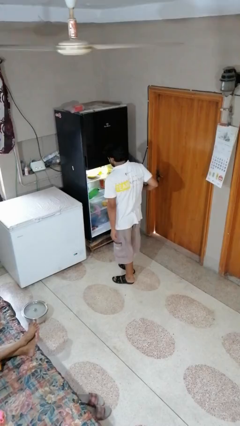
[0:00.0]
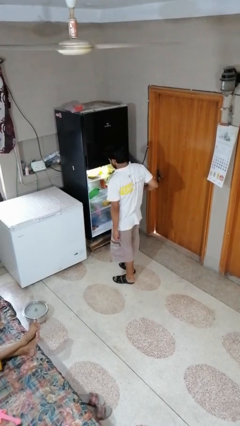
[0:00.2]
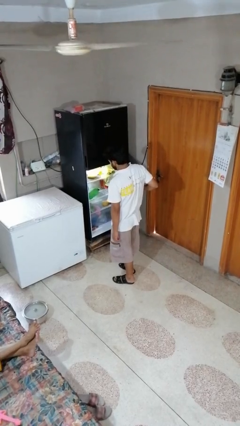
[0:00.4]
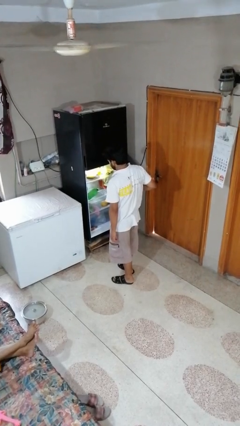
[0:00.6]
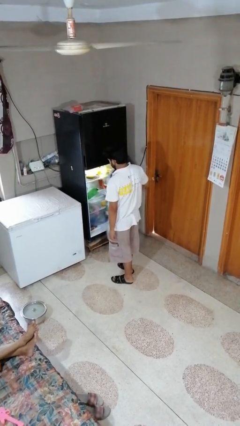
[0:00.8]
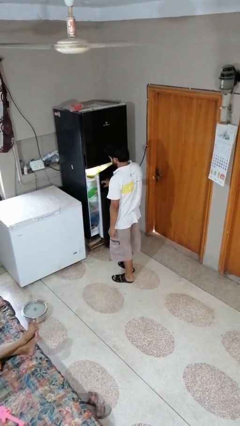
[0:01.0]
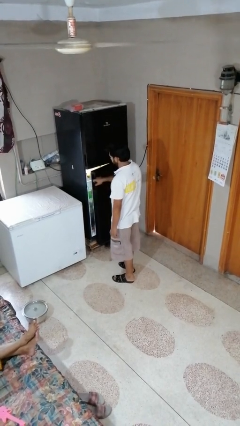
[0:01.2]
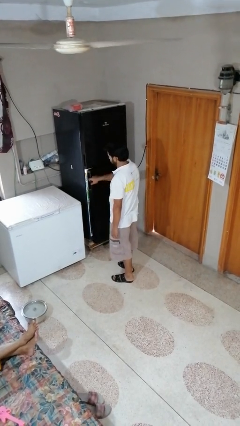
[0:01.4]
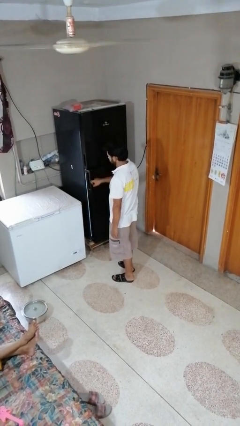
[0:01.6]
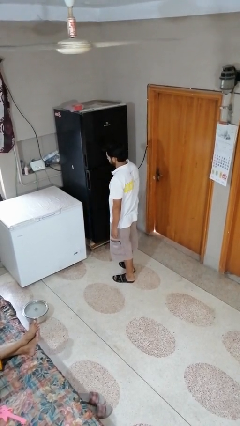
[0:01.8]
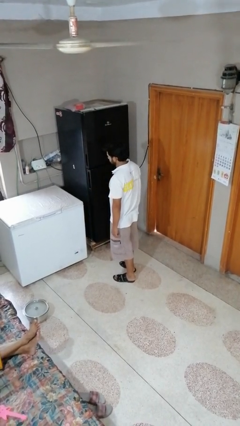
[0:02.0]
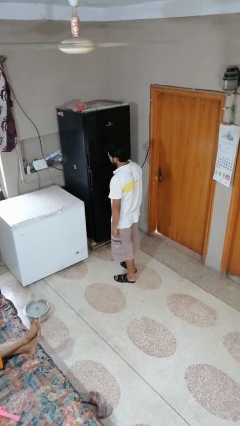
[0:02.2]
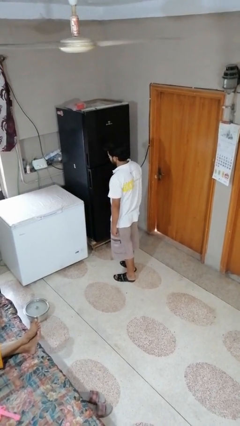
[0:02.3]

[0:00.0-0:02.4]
person closes refrigerator

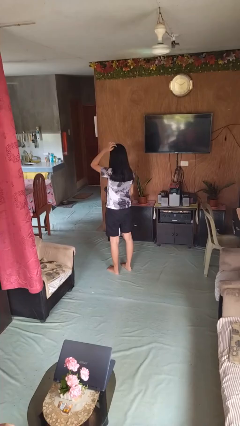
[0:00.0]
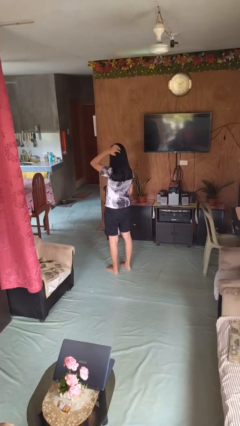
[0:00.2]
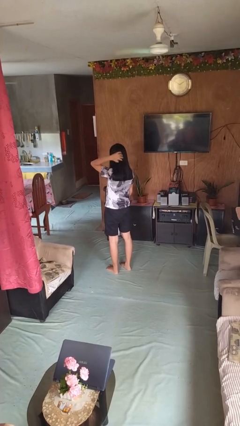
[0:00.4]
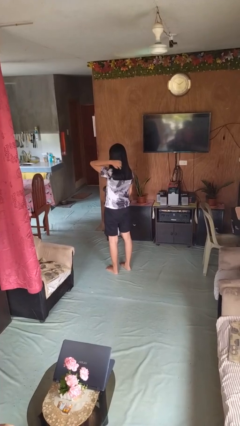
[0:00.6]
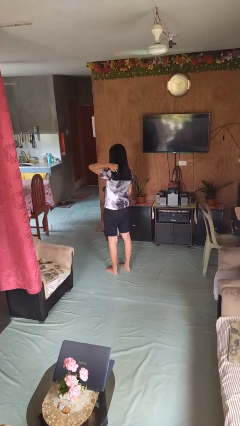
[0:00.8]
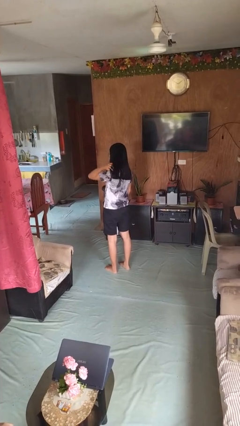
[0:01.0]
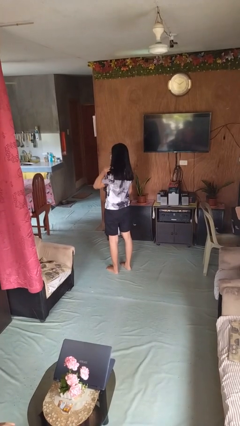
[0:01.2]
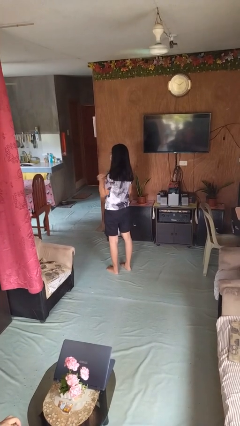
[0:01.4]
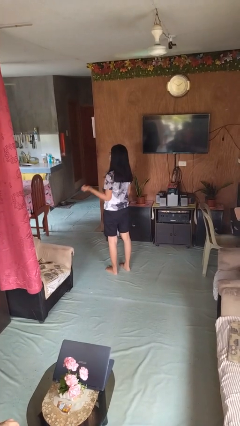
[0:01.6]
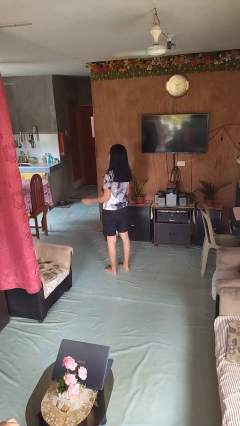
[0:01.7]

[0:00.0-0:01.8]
person strokes hair

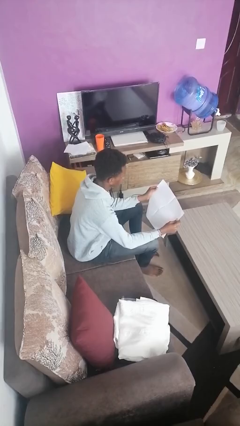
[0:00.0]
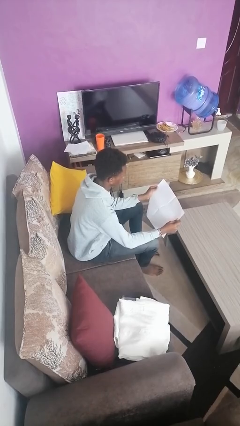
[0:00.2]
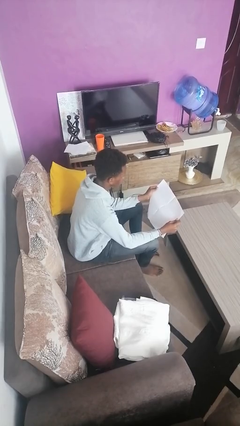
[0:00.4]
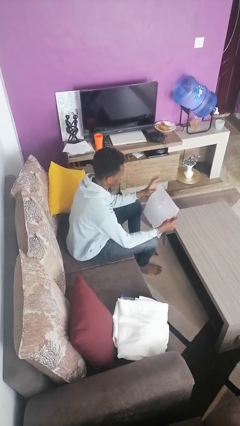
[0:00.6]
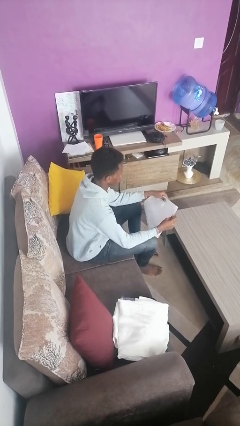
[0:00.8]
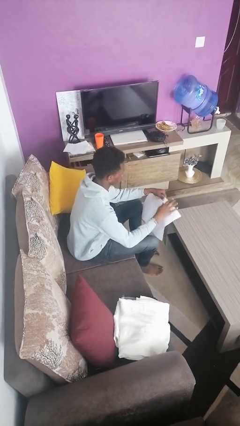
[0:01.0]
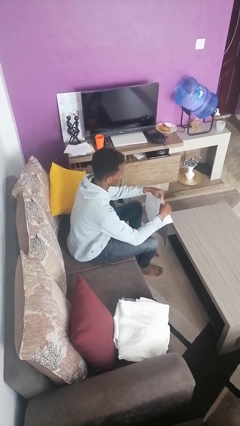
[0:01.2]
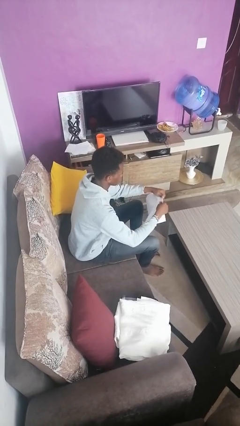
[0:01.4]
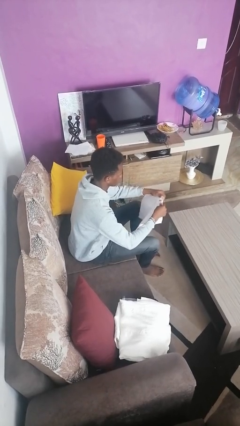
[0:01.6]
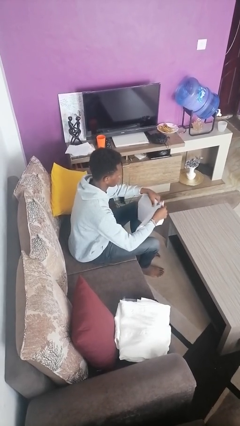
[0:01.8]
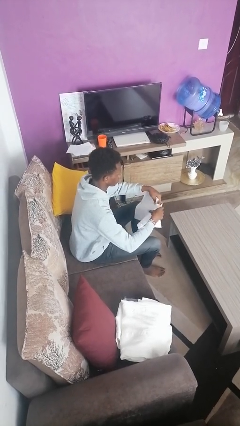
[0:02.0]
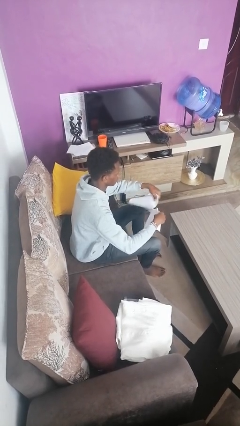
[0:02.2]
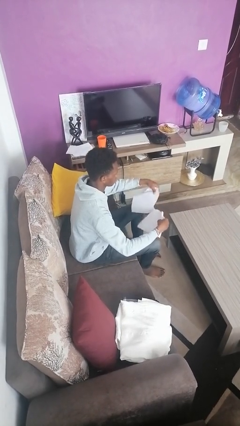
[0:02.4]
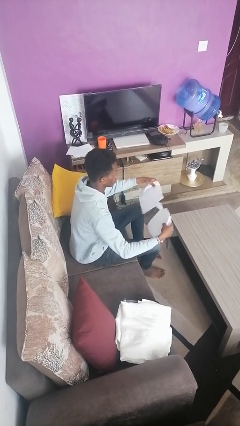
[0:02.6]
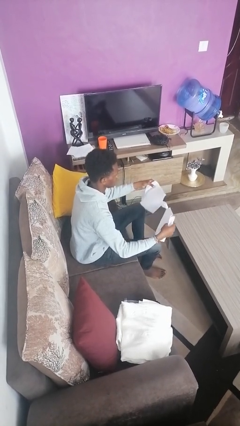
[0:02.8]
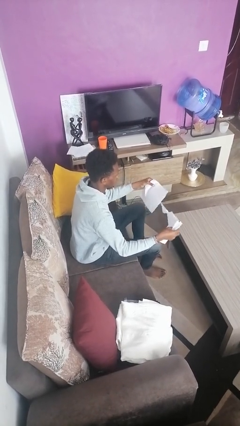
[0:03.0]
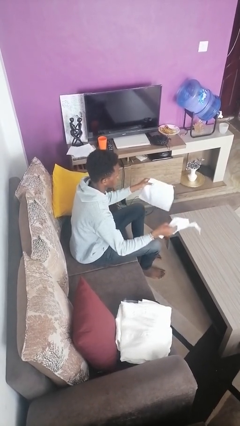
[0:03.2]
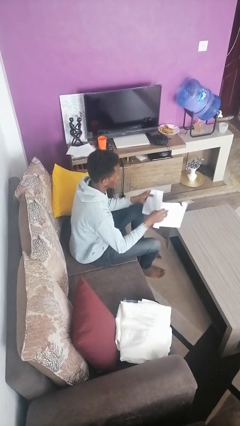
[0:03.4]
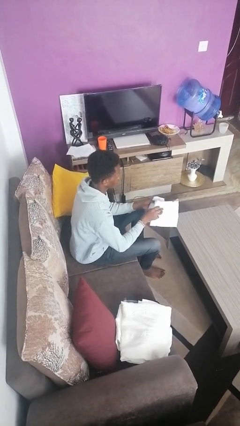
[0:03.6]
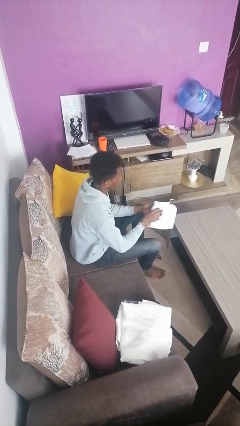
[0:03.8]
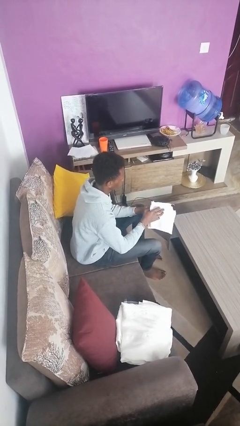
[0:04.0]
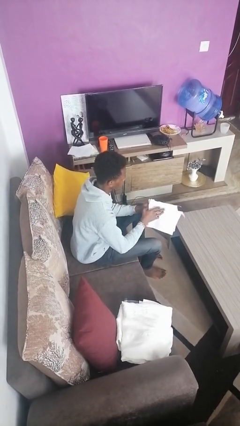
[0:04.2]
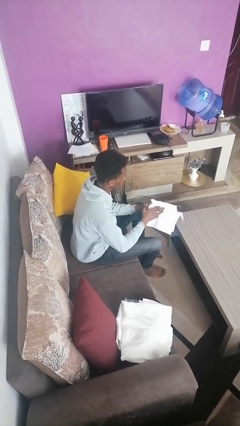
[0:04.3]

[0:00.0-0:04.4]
person tears paper

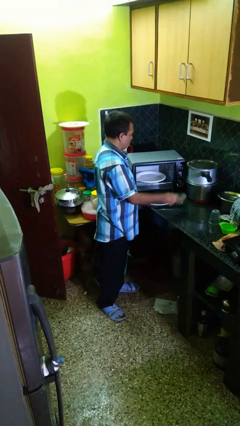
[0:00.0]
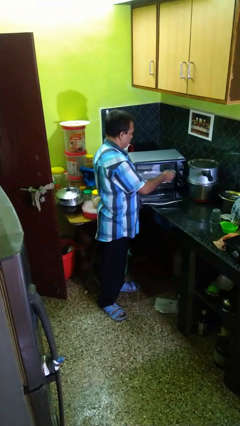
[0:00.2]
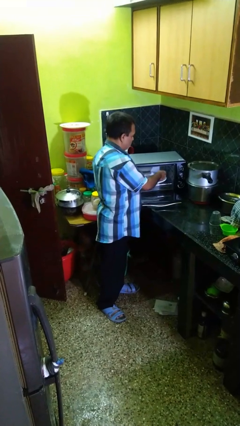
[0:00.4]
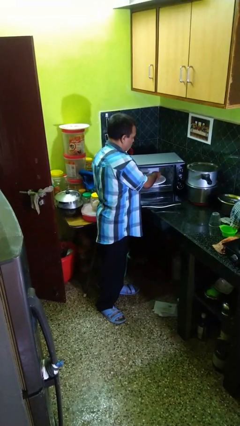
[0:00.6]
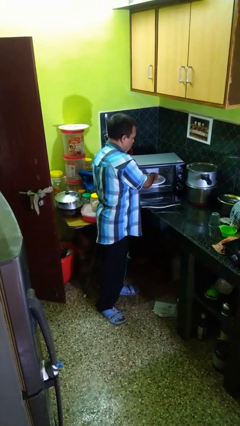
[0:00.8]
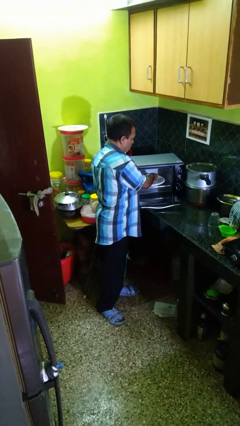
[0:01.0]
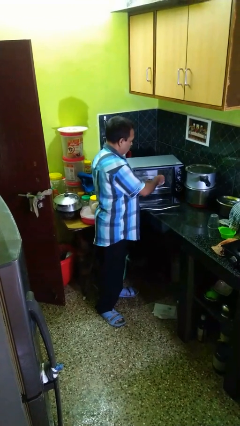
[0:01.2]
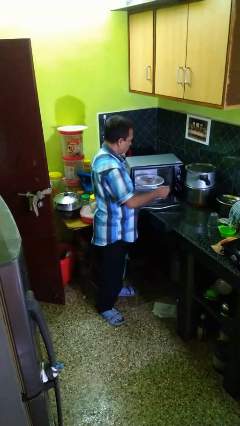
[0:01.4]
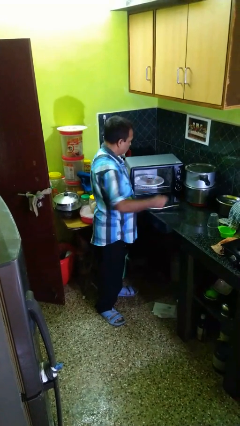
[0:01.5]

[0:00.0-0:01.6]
person puts object into microwave

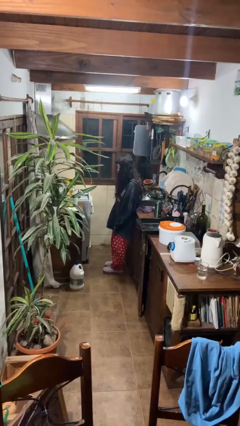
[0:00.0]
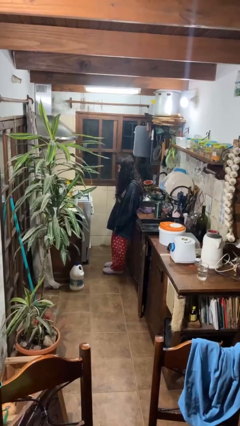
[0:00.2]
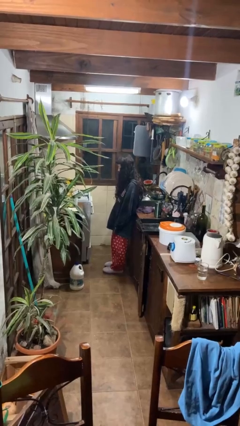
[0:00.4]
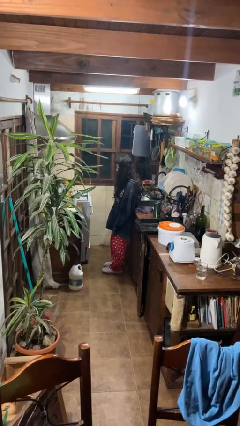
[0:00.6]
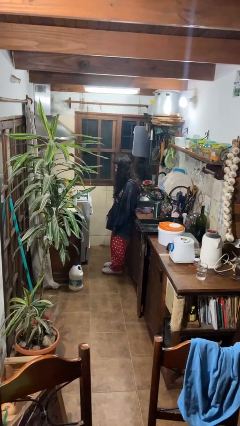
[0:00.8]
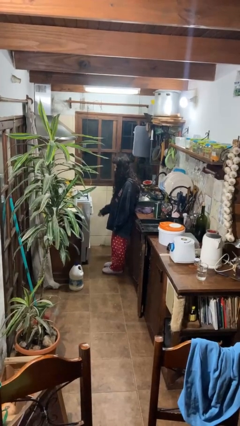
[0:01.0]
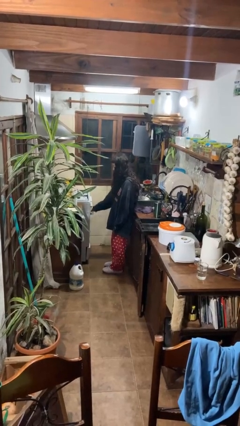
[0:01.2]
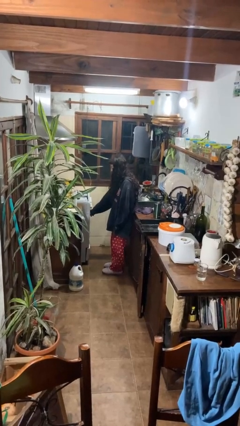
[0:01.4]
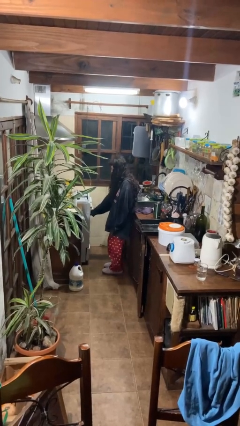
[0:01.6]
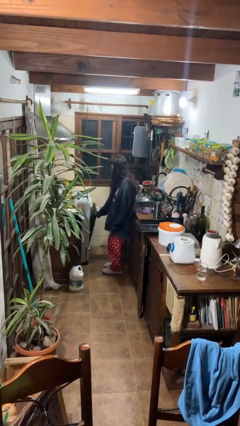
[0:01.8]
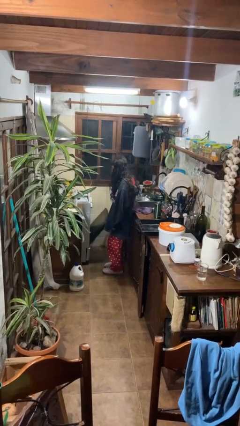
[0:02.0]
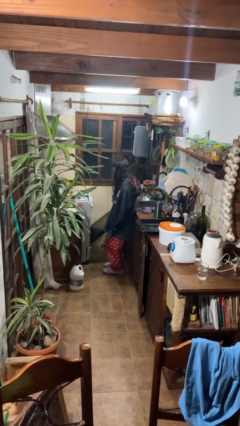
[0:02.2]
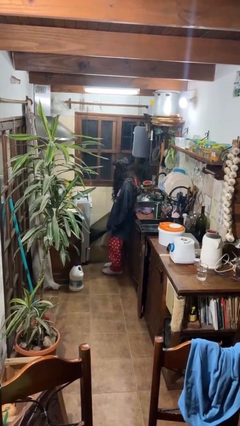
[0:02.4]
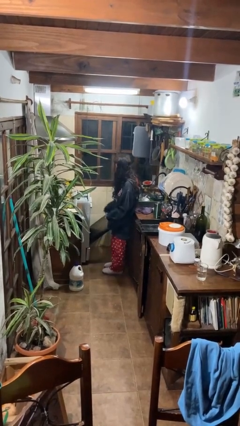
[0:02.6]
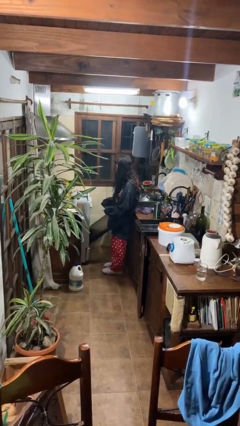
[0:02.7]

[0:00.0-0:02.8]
person opens oven door

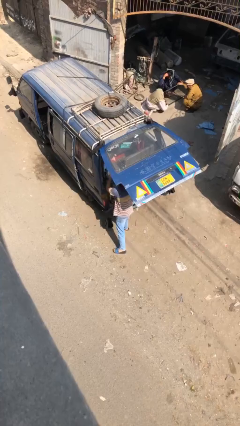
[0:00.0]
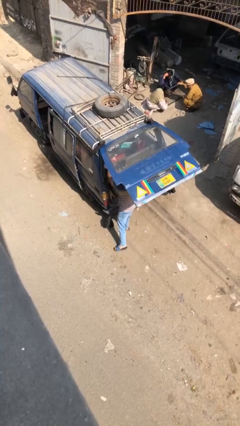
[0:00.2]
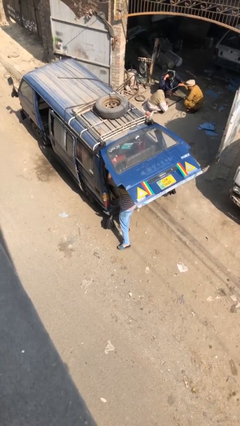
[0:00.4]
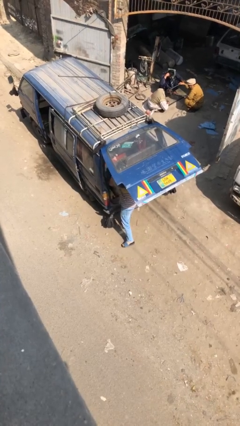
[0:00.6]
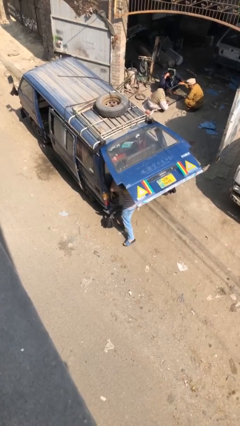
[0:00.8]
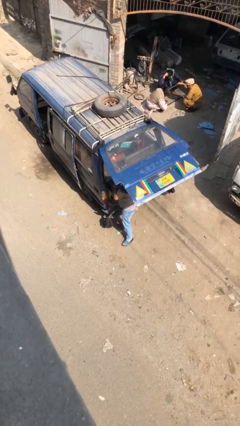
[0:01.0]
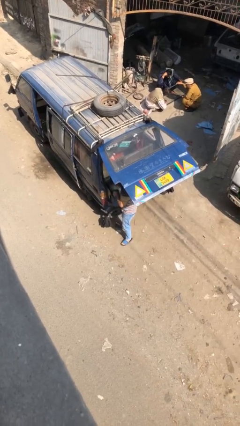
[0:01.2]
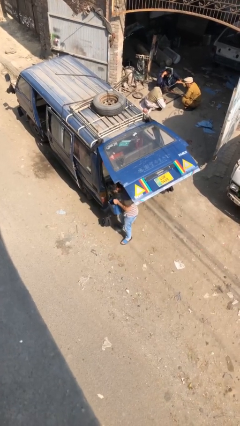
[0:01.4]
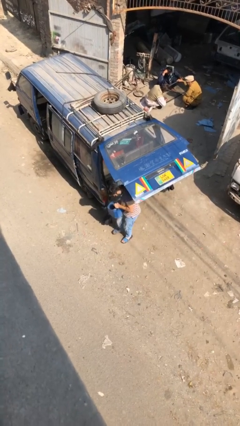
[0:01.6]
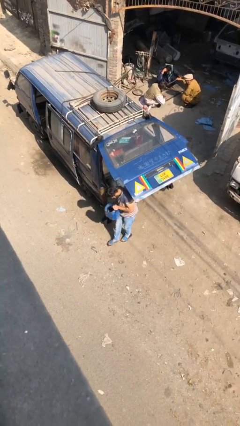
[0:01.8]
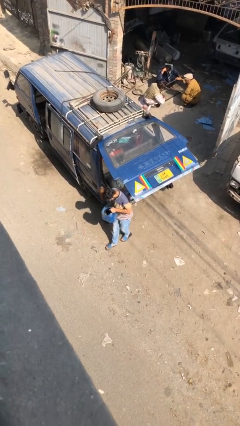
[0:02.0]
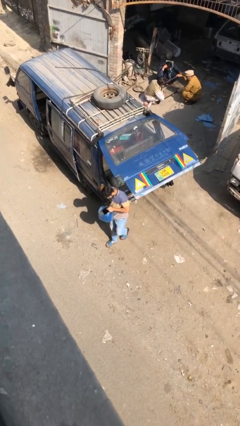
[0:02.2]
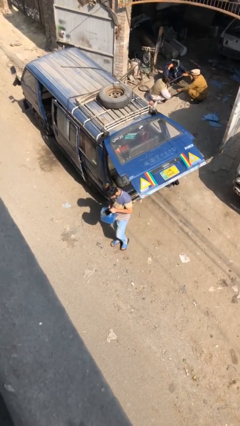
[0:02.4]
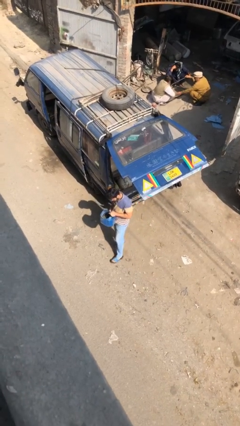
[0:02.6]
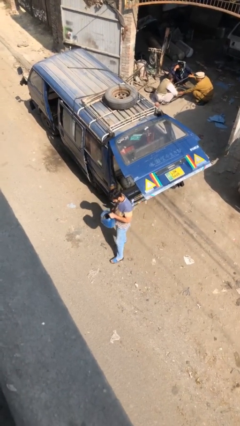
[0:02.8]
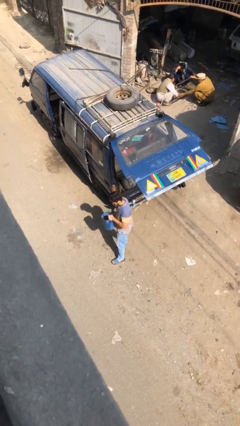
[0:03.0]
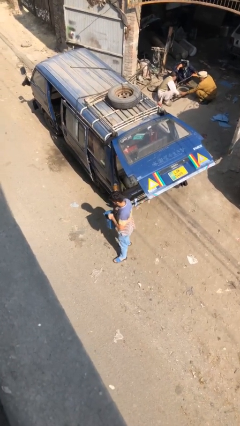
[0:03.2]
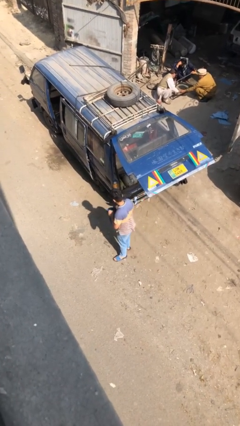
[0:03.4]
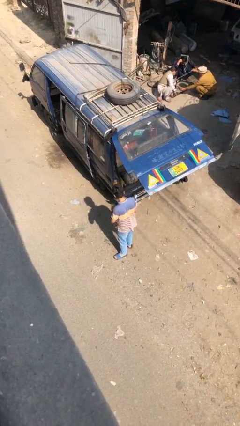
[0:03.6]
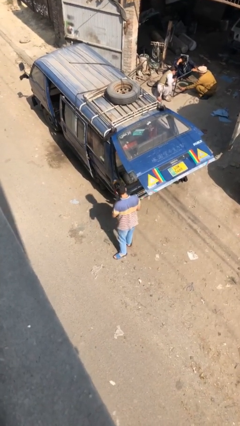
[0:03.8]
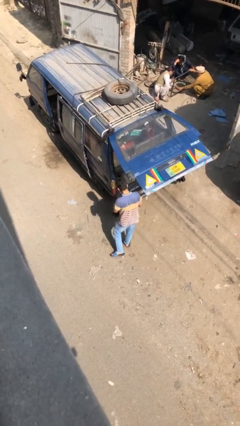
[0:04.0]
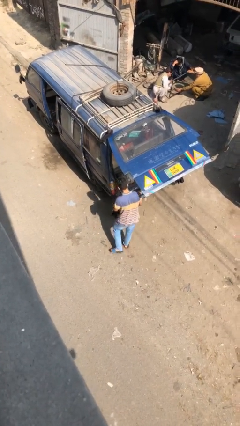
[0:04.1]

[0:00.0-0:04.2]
person unloads car

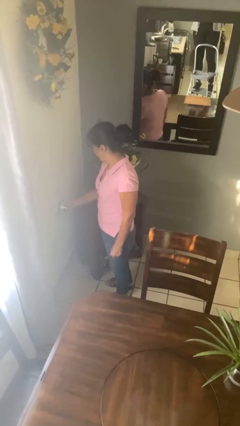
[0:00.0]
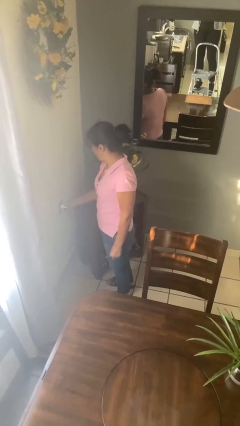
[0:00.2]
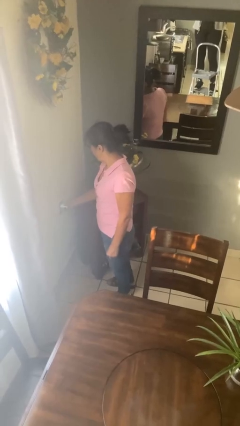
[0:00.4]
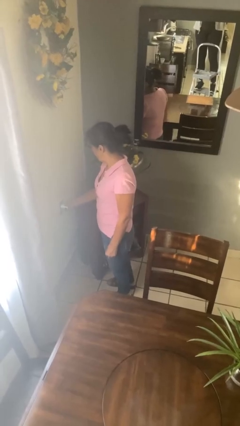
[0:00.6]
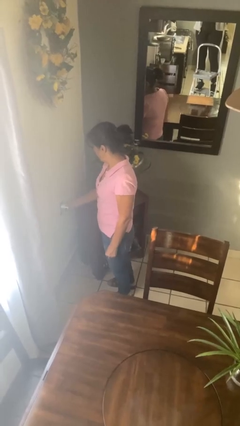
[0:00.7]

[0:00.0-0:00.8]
person plugs into electrical socket
